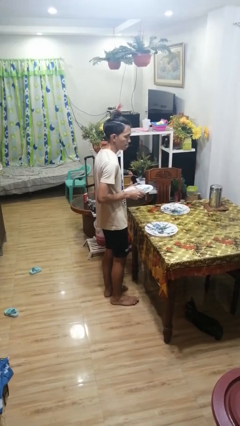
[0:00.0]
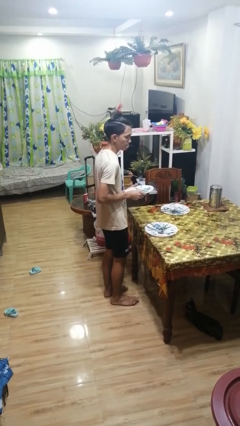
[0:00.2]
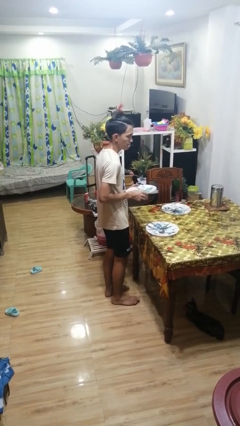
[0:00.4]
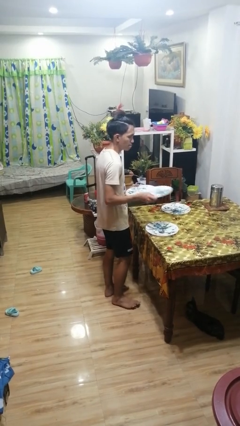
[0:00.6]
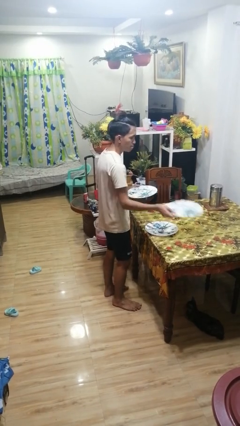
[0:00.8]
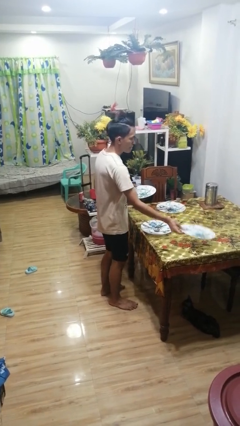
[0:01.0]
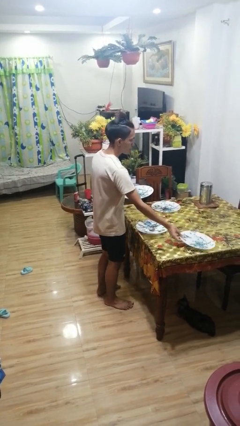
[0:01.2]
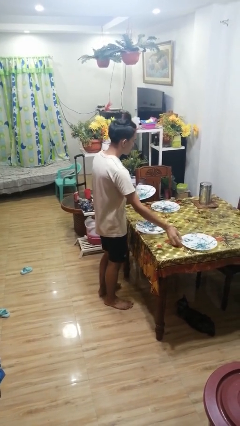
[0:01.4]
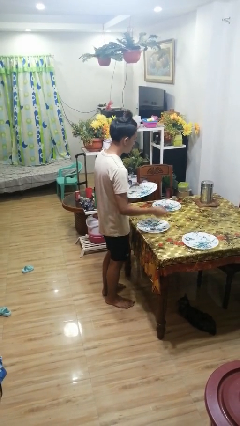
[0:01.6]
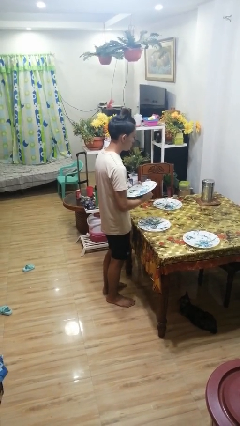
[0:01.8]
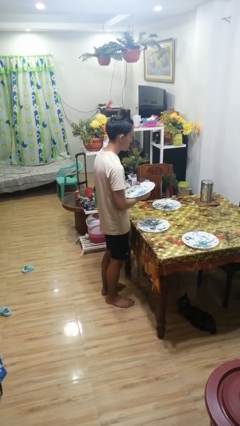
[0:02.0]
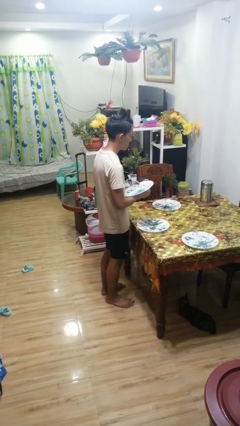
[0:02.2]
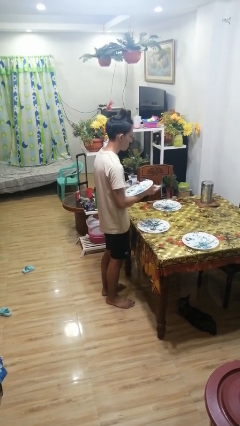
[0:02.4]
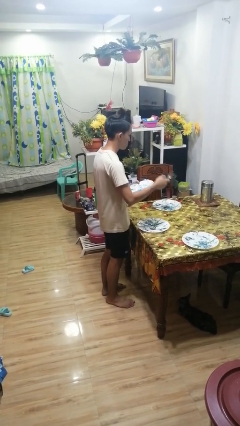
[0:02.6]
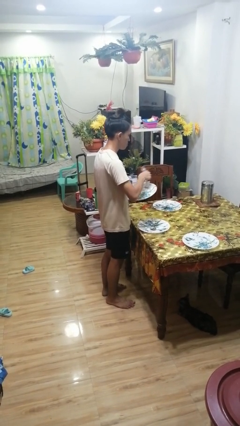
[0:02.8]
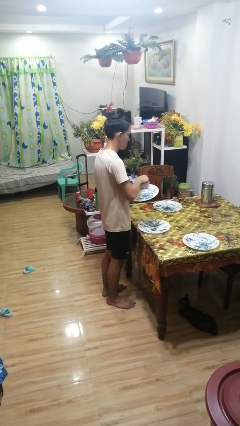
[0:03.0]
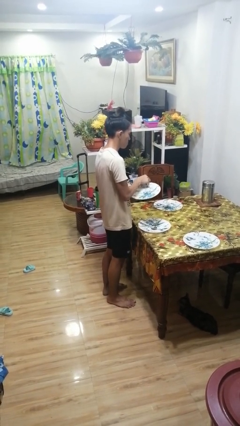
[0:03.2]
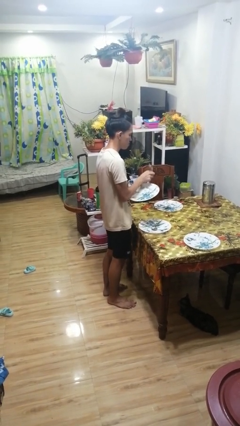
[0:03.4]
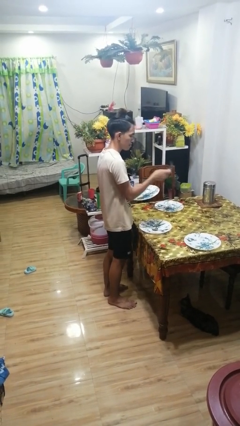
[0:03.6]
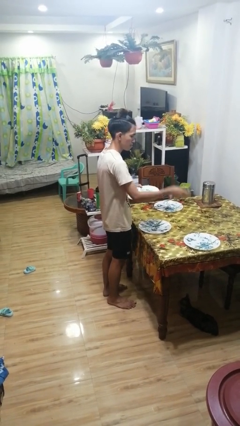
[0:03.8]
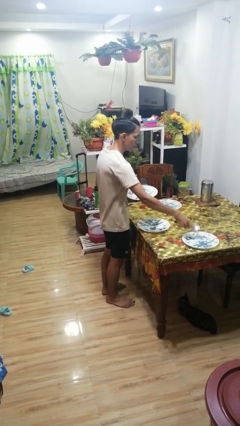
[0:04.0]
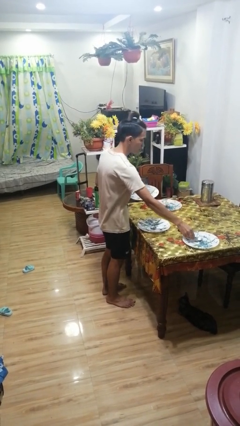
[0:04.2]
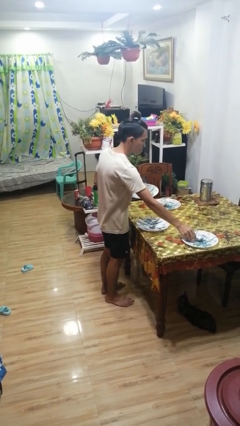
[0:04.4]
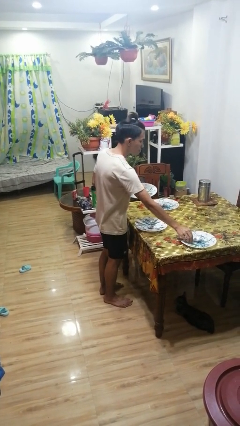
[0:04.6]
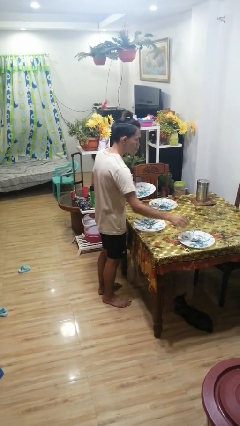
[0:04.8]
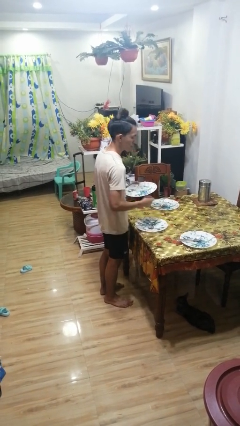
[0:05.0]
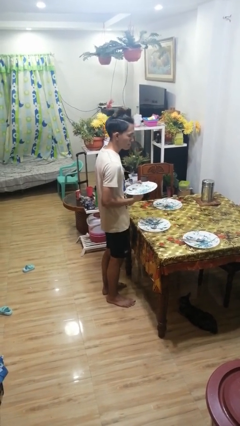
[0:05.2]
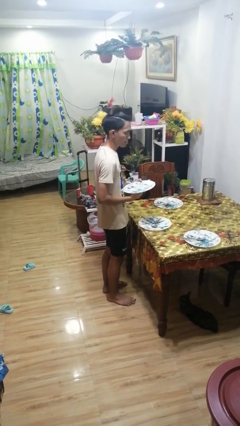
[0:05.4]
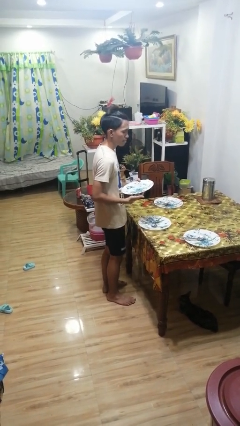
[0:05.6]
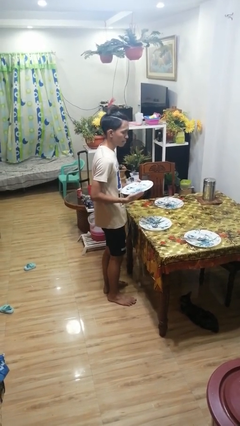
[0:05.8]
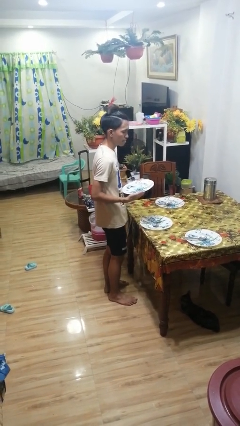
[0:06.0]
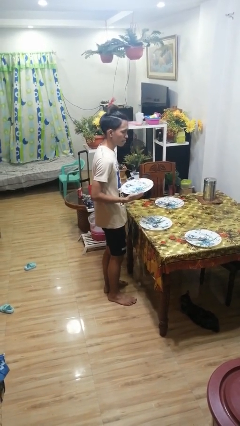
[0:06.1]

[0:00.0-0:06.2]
person sets table

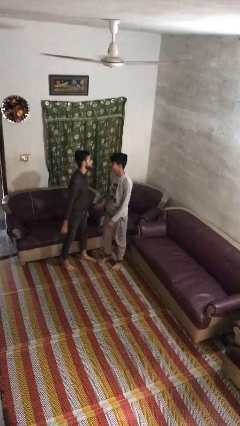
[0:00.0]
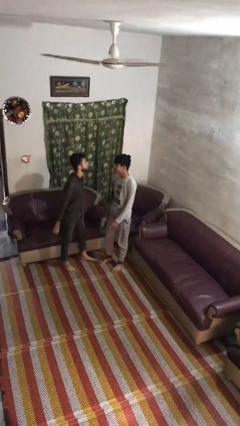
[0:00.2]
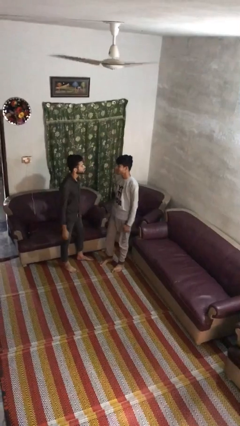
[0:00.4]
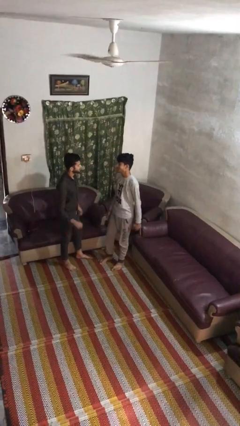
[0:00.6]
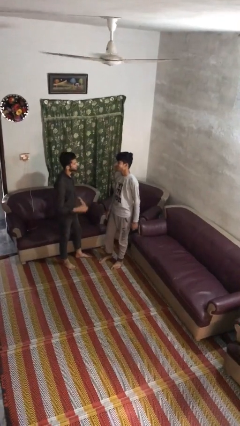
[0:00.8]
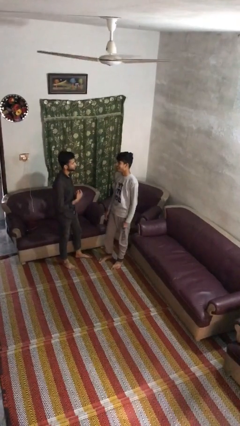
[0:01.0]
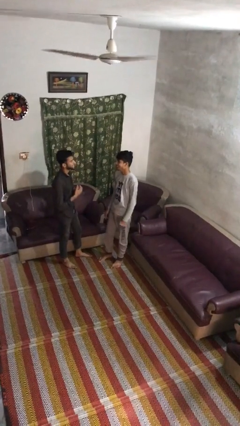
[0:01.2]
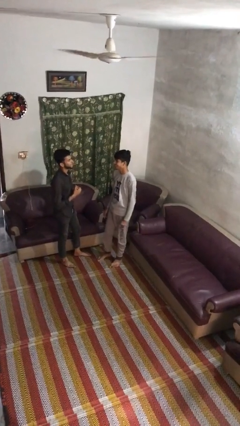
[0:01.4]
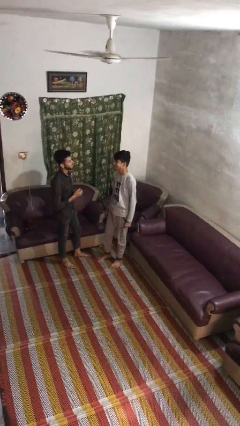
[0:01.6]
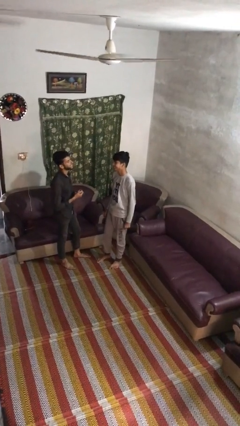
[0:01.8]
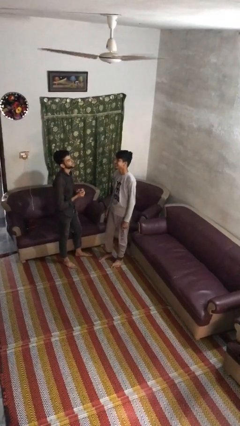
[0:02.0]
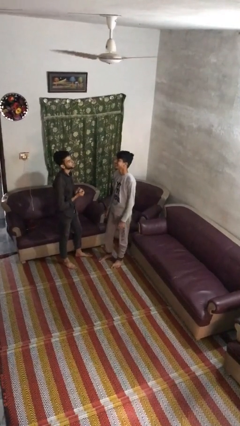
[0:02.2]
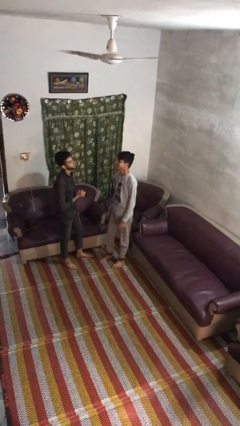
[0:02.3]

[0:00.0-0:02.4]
person talks to person

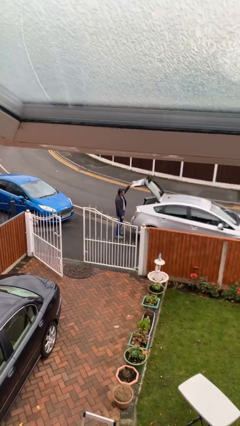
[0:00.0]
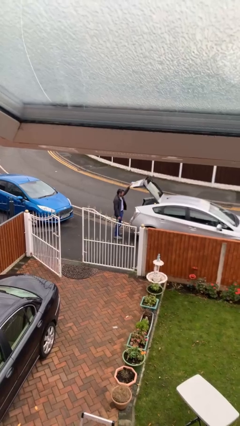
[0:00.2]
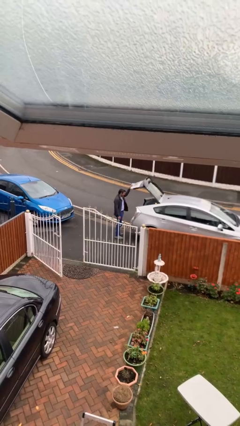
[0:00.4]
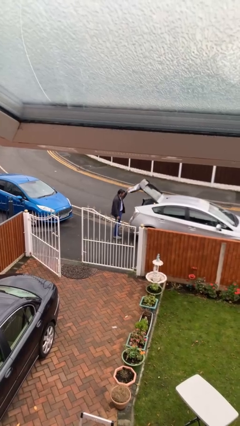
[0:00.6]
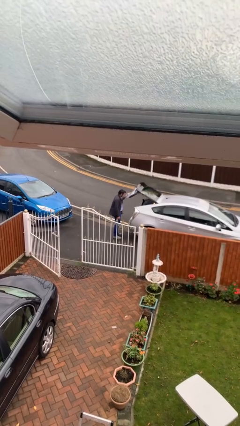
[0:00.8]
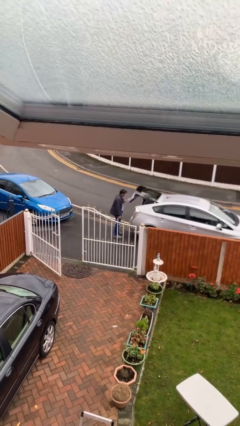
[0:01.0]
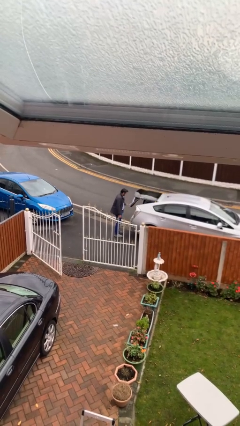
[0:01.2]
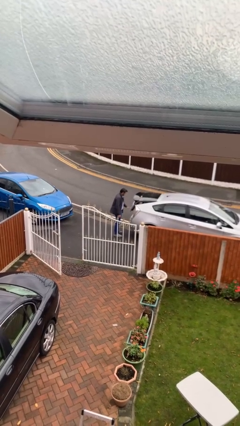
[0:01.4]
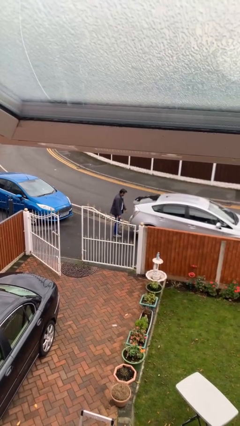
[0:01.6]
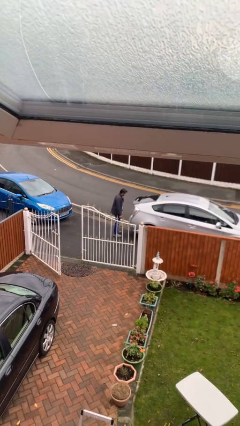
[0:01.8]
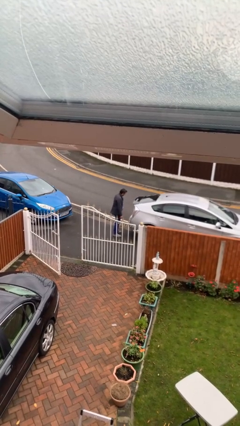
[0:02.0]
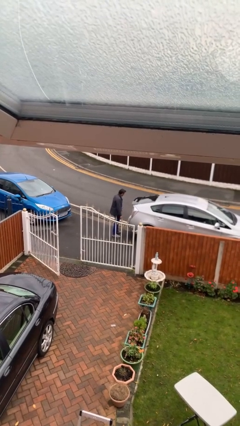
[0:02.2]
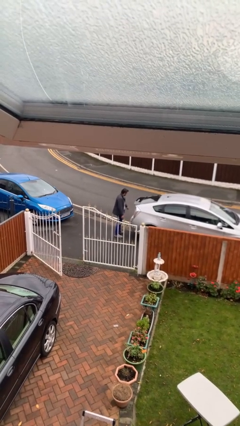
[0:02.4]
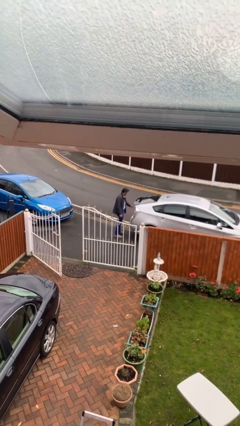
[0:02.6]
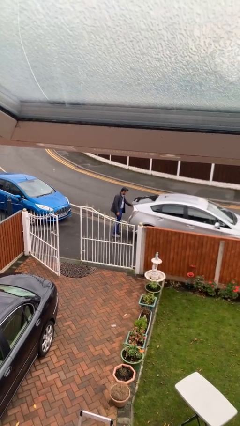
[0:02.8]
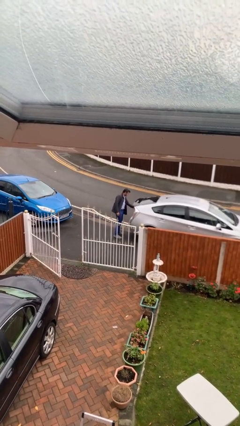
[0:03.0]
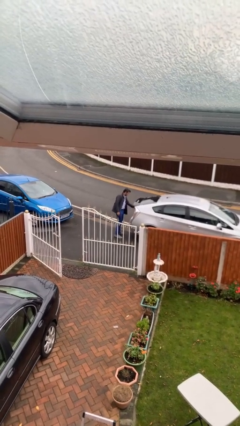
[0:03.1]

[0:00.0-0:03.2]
person closes car trunk

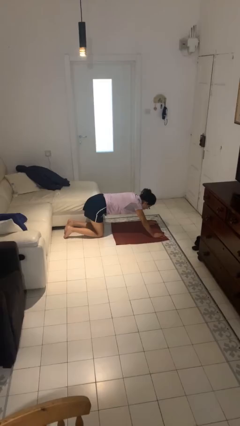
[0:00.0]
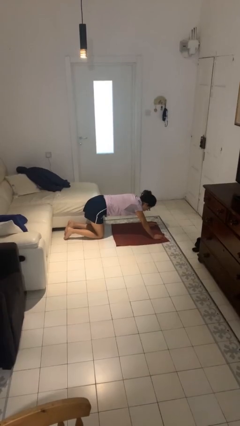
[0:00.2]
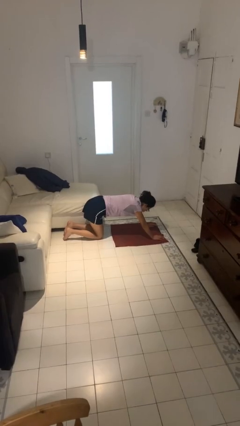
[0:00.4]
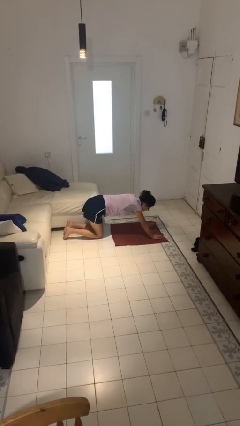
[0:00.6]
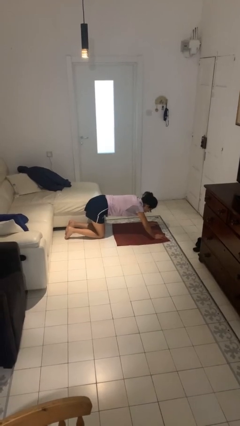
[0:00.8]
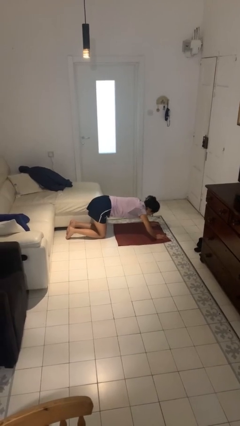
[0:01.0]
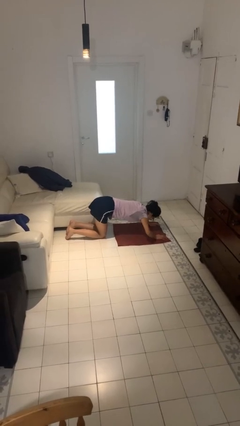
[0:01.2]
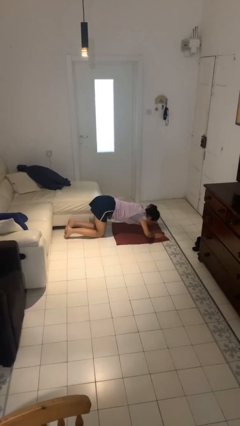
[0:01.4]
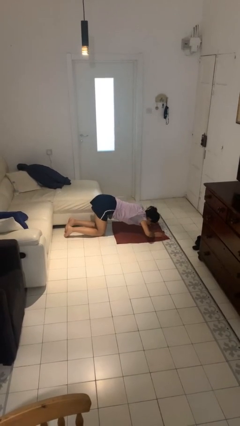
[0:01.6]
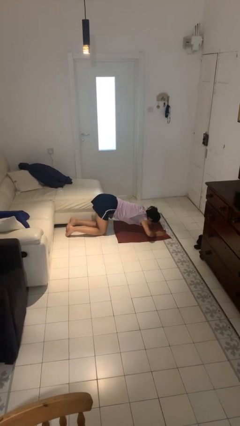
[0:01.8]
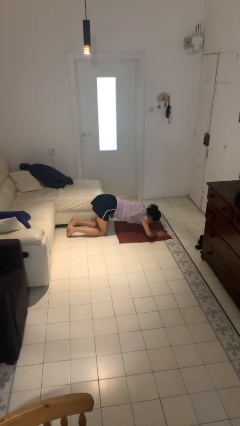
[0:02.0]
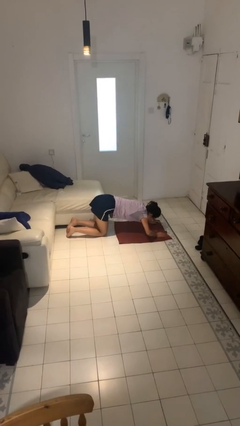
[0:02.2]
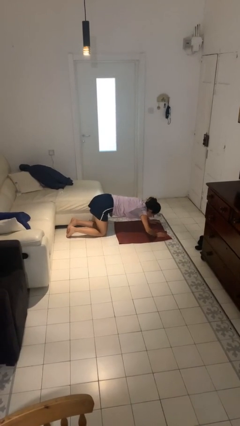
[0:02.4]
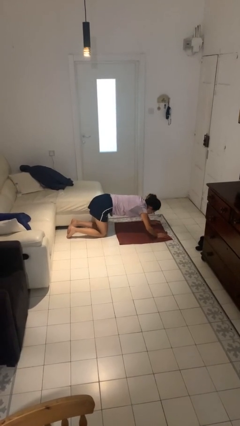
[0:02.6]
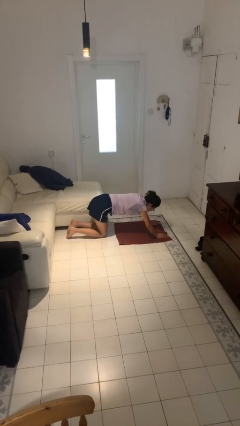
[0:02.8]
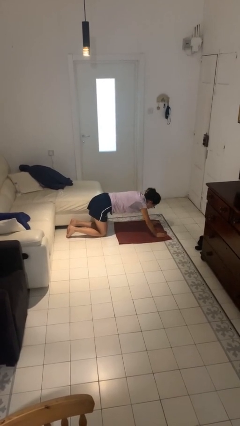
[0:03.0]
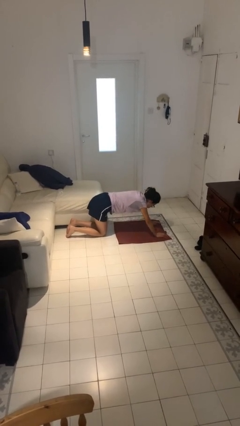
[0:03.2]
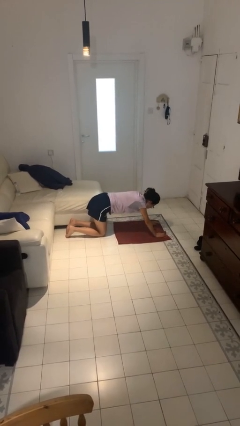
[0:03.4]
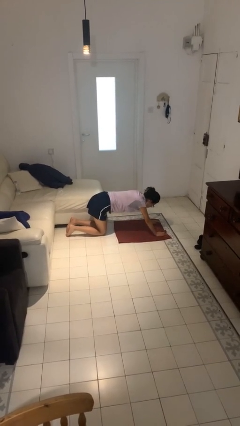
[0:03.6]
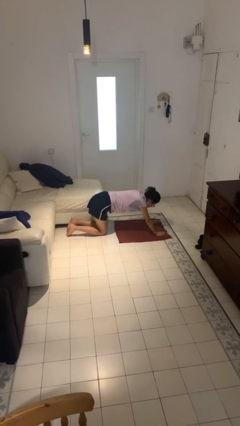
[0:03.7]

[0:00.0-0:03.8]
person exercises with pushup

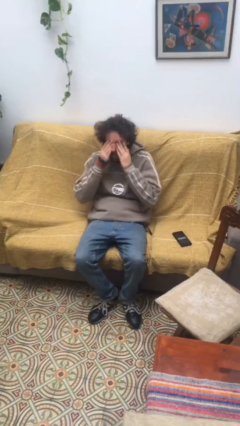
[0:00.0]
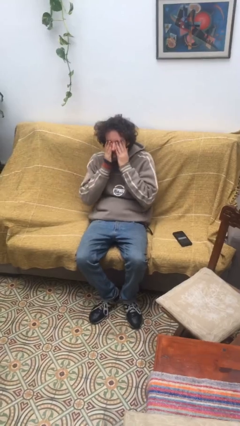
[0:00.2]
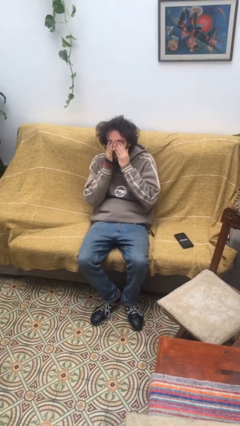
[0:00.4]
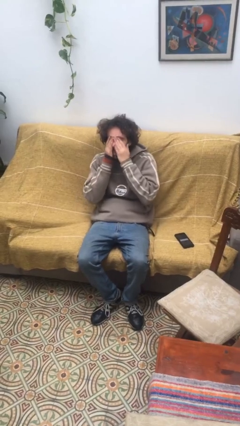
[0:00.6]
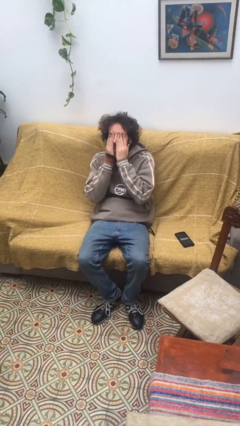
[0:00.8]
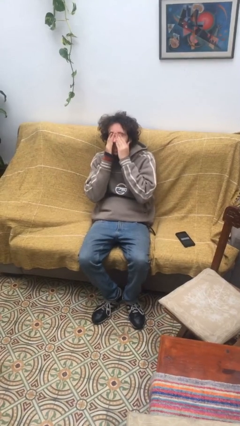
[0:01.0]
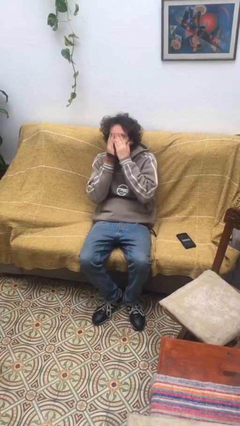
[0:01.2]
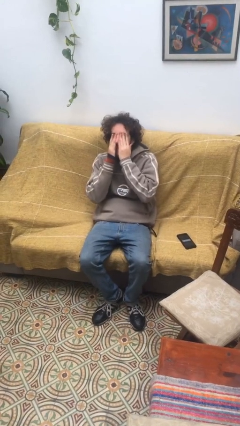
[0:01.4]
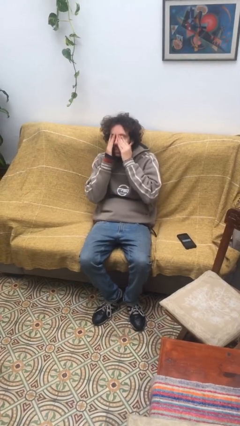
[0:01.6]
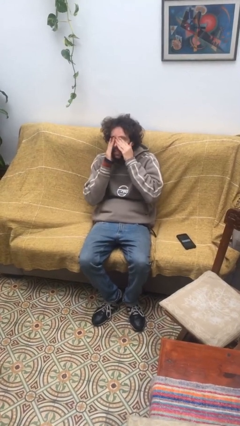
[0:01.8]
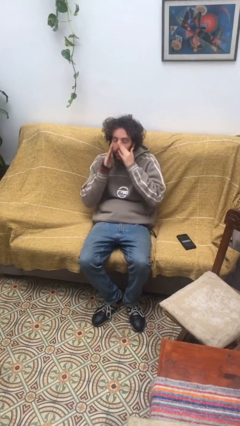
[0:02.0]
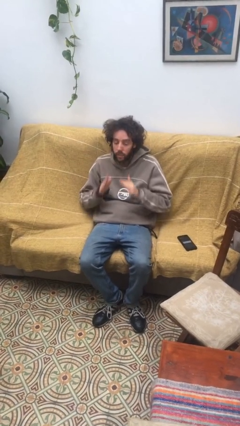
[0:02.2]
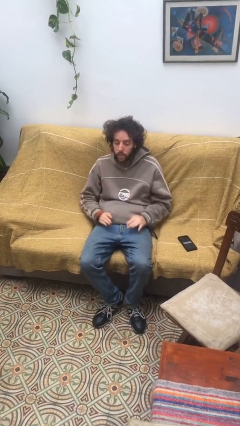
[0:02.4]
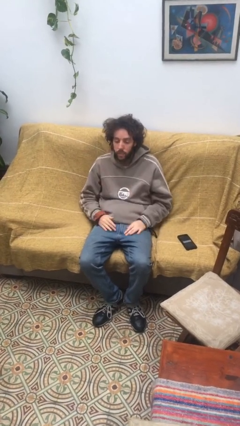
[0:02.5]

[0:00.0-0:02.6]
person rubs eyes
